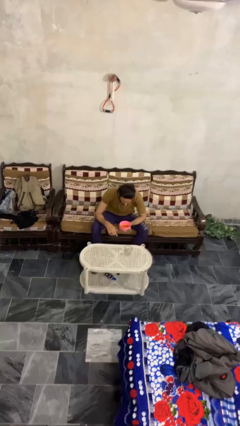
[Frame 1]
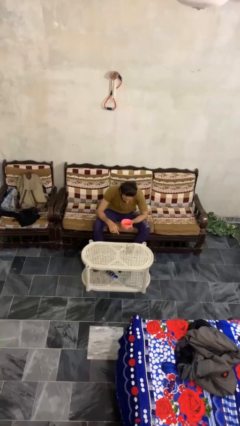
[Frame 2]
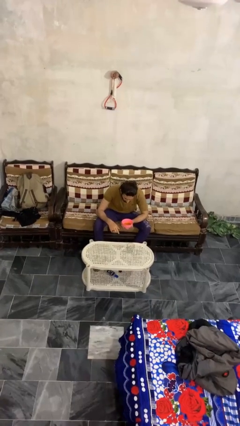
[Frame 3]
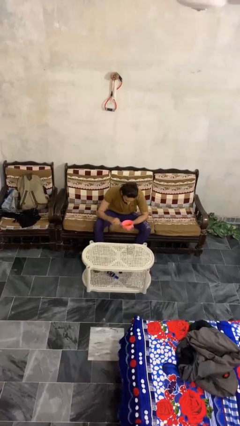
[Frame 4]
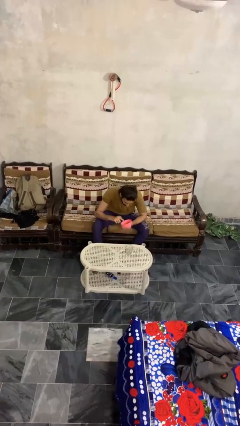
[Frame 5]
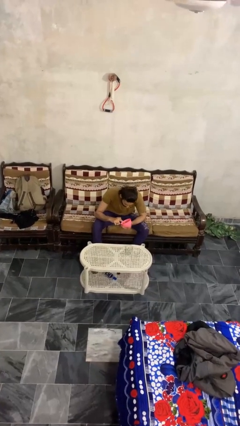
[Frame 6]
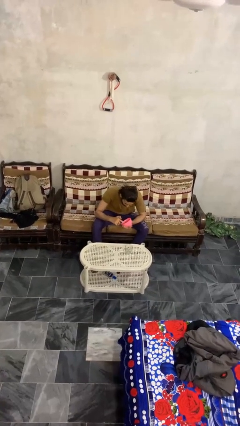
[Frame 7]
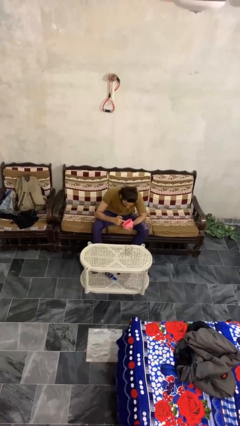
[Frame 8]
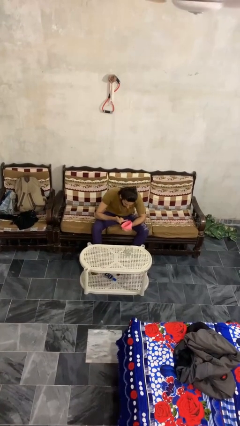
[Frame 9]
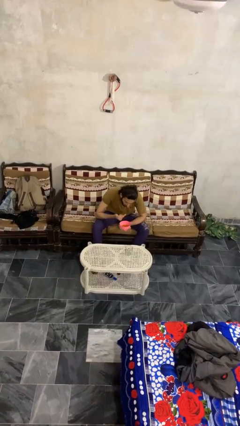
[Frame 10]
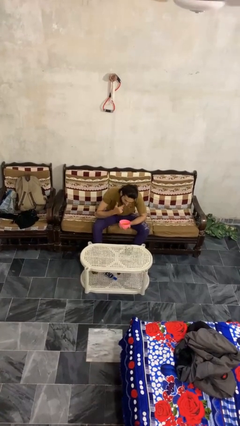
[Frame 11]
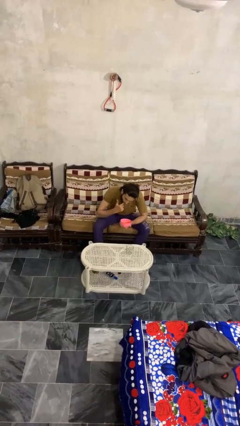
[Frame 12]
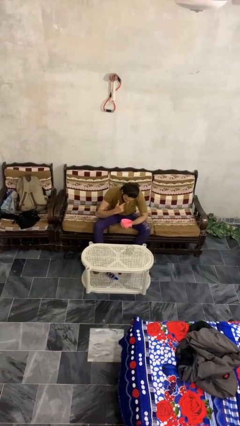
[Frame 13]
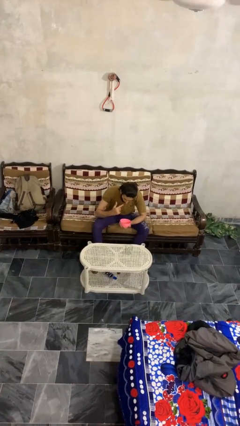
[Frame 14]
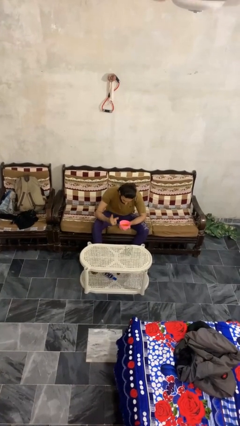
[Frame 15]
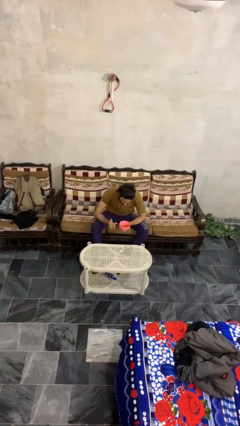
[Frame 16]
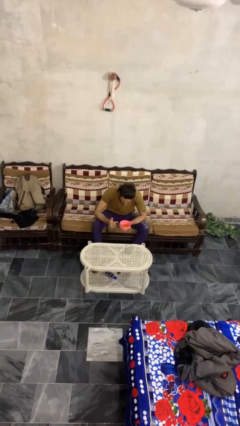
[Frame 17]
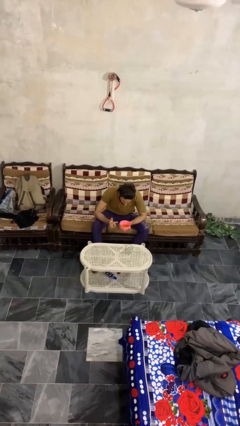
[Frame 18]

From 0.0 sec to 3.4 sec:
person eats with hands

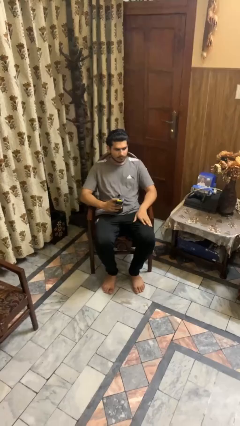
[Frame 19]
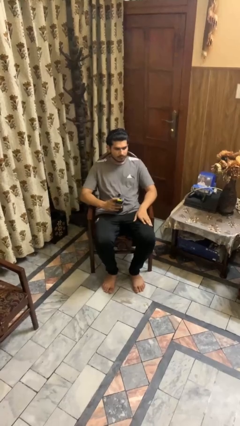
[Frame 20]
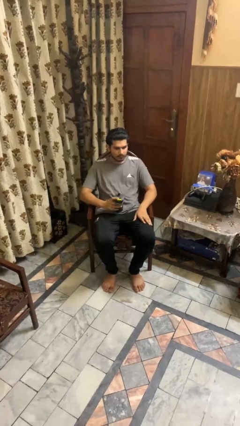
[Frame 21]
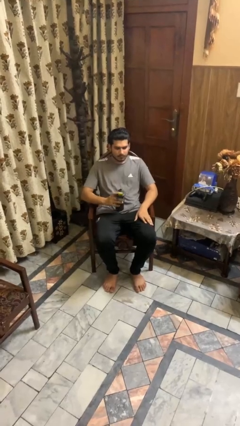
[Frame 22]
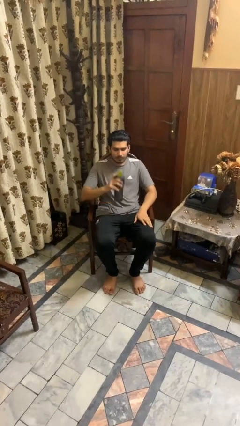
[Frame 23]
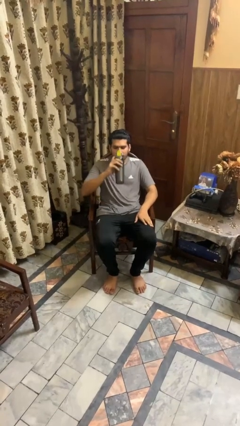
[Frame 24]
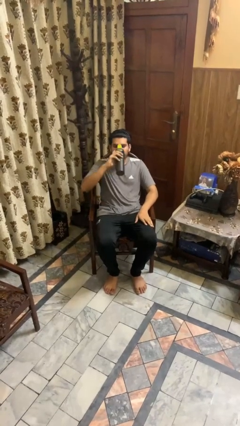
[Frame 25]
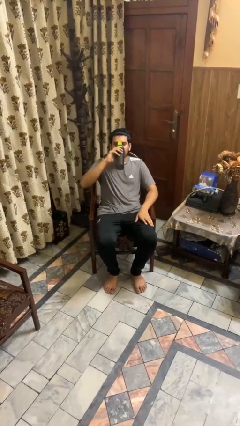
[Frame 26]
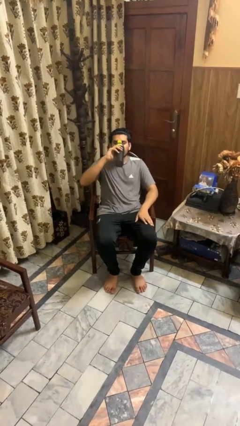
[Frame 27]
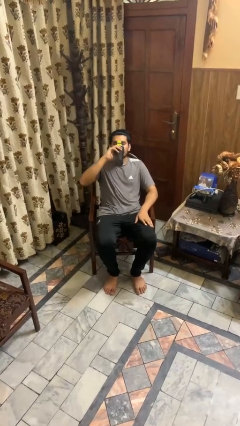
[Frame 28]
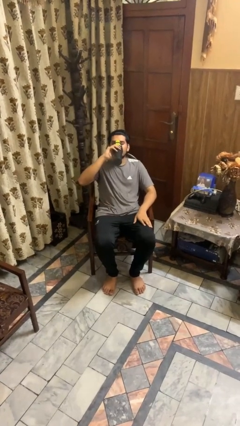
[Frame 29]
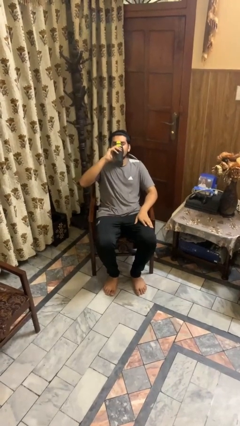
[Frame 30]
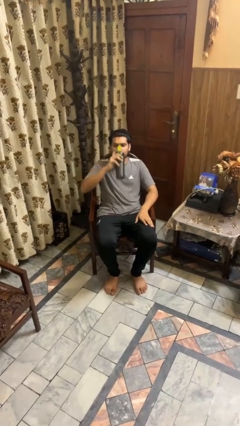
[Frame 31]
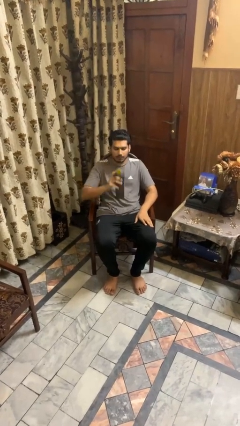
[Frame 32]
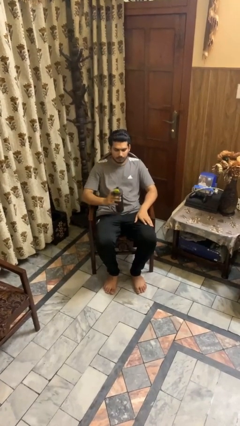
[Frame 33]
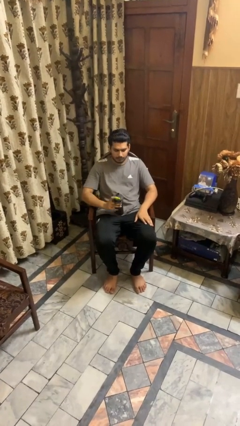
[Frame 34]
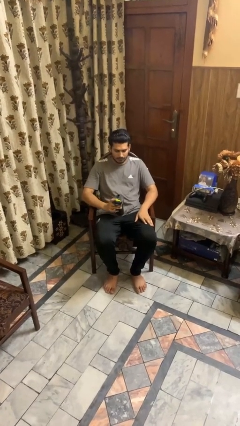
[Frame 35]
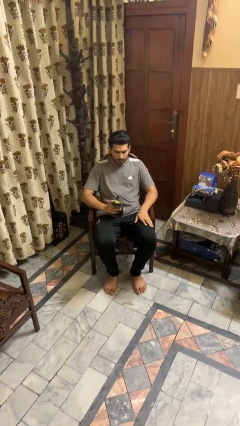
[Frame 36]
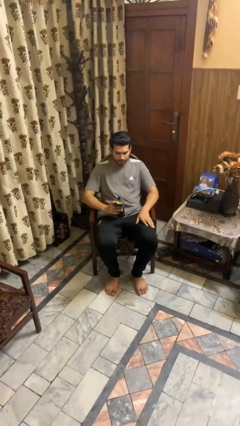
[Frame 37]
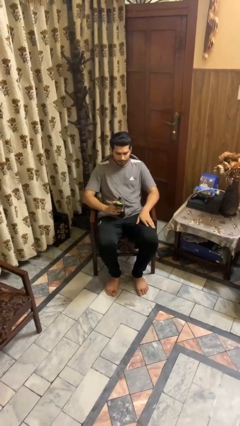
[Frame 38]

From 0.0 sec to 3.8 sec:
person drinks from bottle

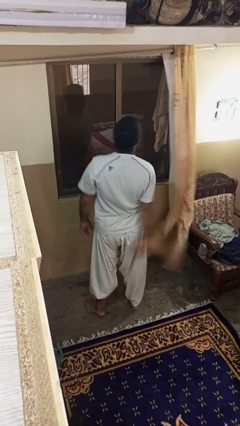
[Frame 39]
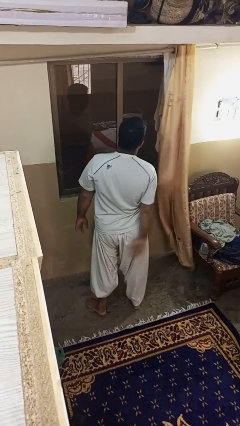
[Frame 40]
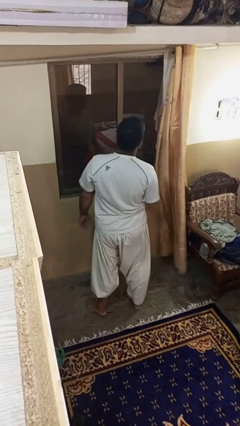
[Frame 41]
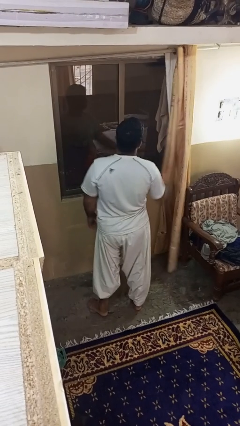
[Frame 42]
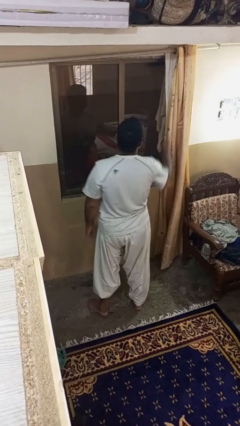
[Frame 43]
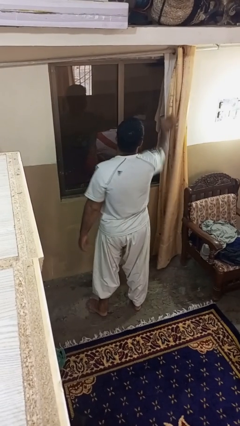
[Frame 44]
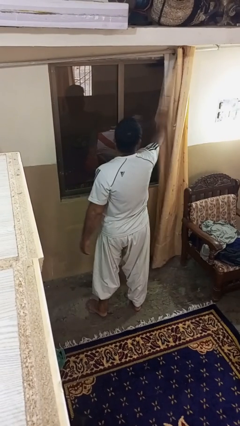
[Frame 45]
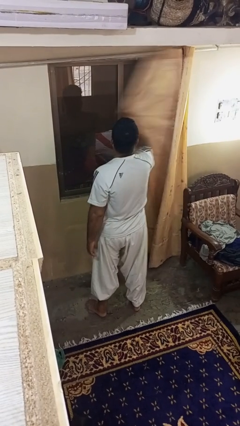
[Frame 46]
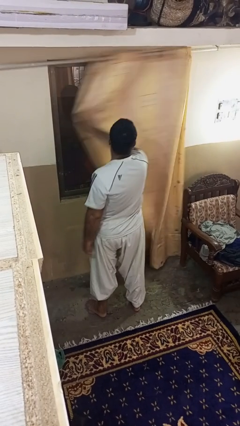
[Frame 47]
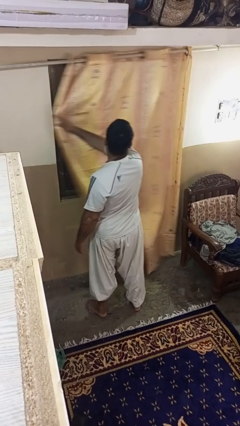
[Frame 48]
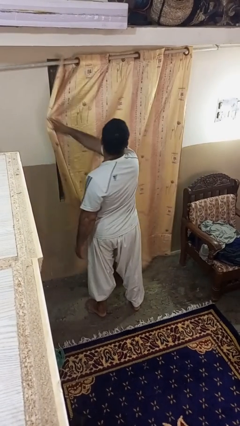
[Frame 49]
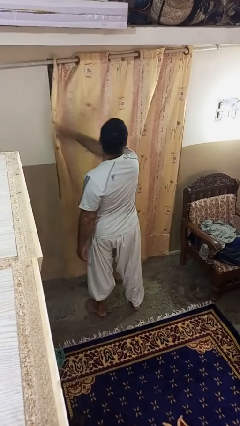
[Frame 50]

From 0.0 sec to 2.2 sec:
person closes curtains

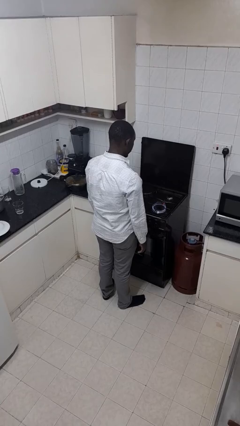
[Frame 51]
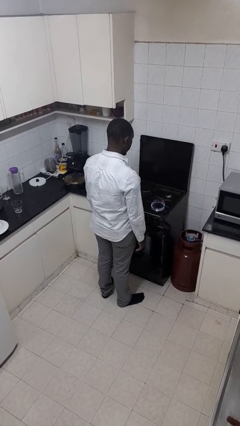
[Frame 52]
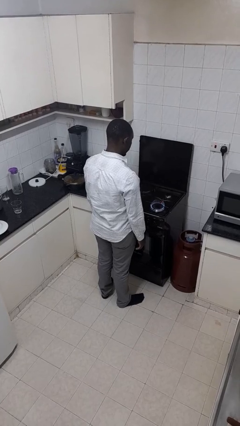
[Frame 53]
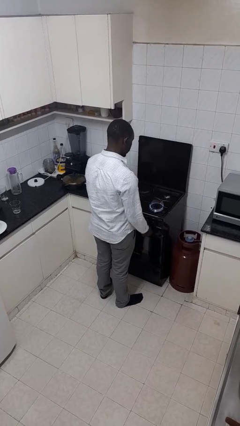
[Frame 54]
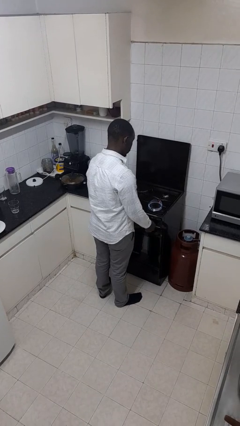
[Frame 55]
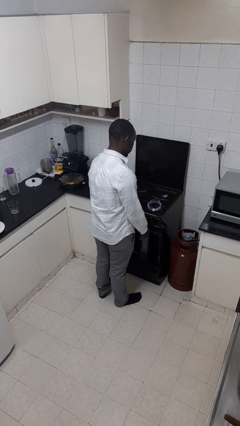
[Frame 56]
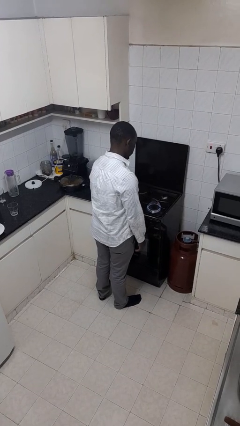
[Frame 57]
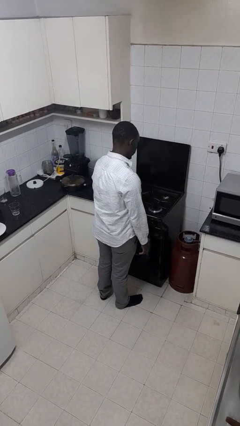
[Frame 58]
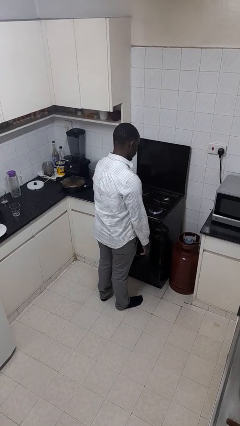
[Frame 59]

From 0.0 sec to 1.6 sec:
person turns off stovetop

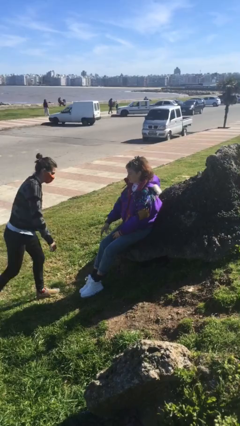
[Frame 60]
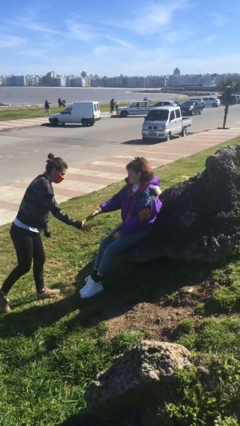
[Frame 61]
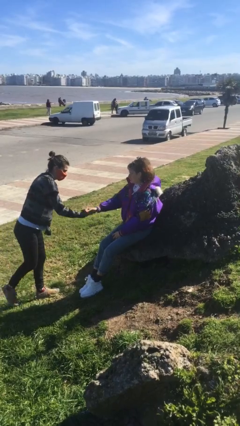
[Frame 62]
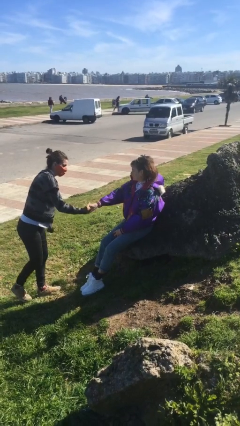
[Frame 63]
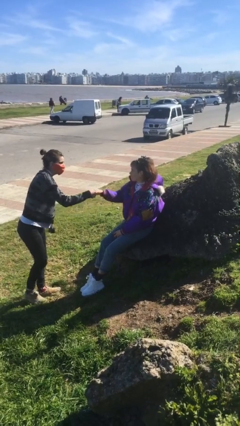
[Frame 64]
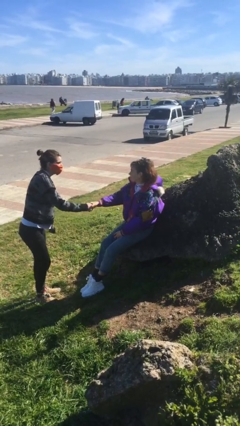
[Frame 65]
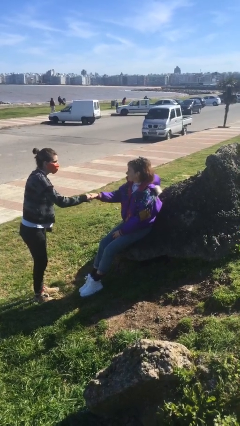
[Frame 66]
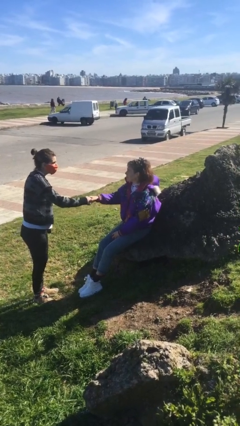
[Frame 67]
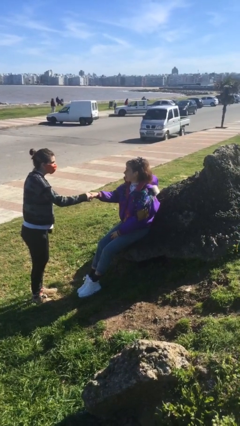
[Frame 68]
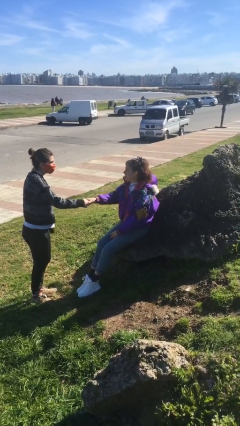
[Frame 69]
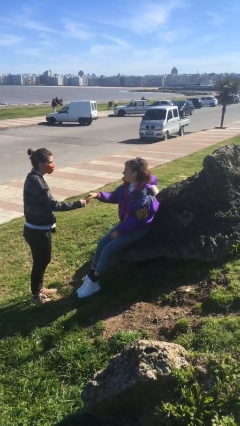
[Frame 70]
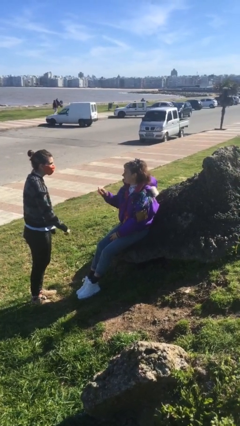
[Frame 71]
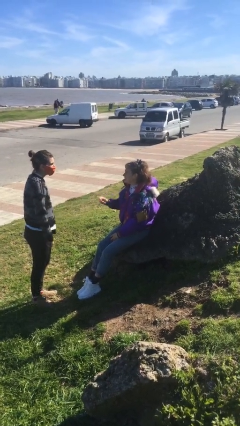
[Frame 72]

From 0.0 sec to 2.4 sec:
person shakes hand

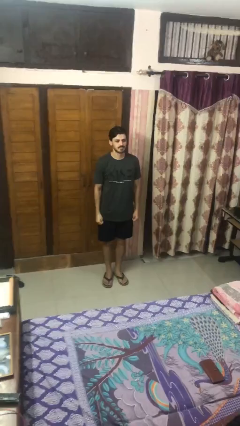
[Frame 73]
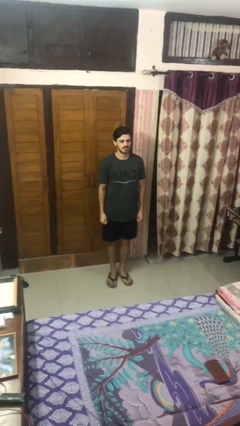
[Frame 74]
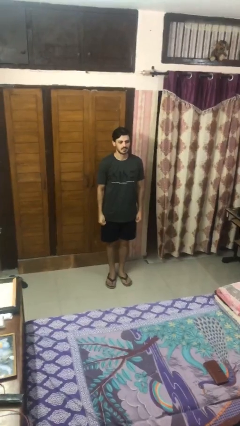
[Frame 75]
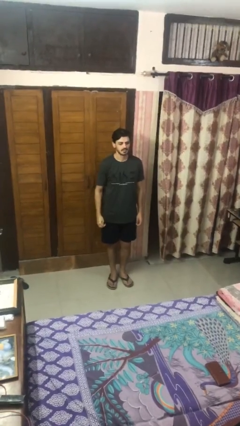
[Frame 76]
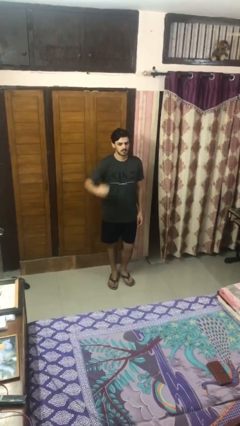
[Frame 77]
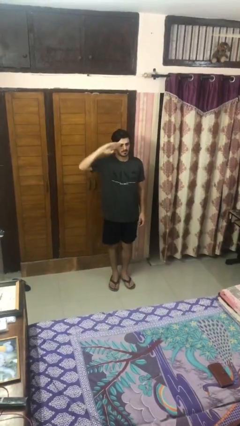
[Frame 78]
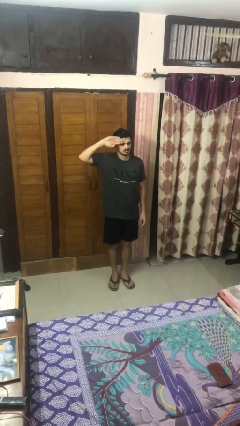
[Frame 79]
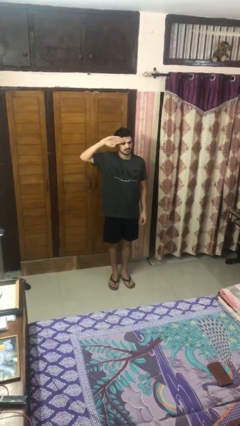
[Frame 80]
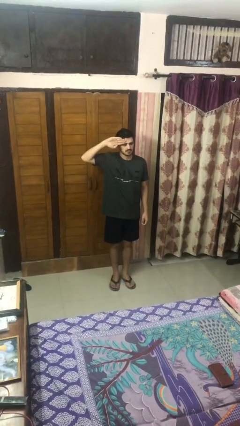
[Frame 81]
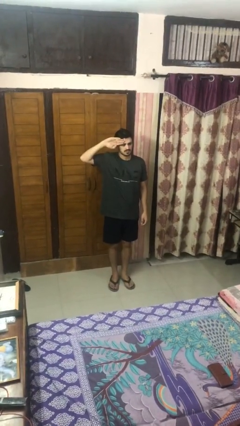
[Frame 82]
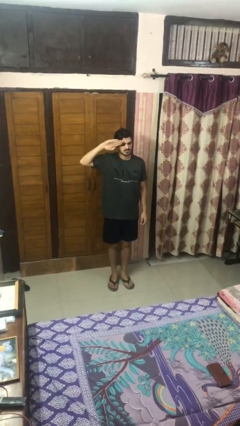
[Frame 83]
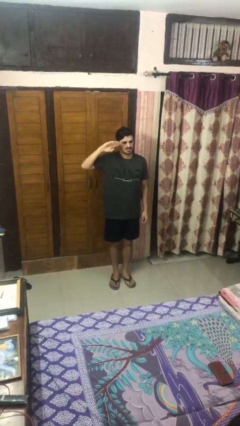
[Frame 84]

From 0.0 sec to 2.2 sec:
person salutes

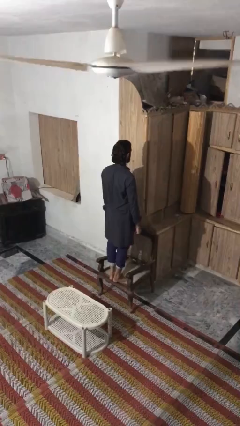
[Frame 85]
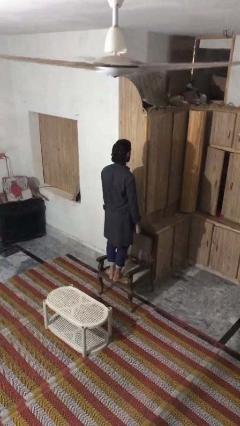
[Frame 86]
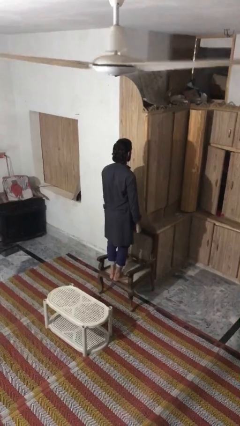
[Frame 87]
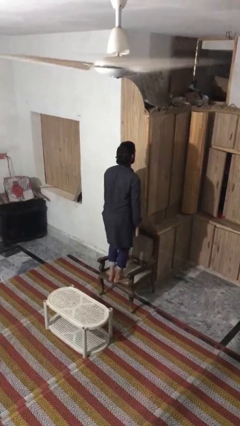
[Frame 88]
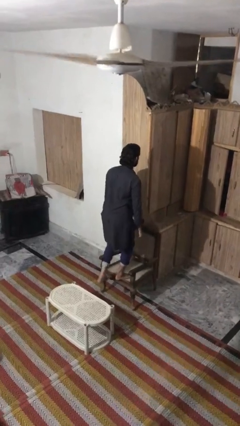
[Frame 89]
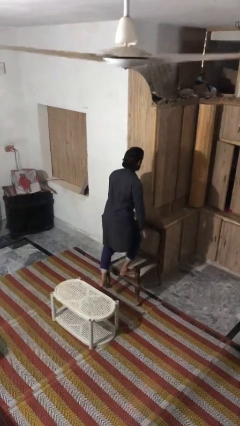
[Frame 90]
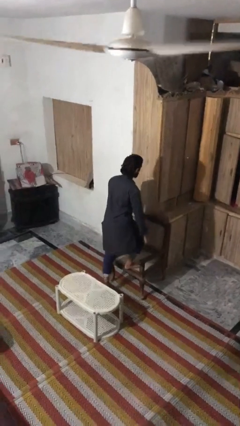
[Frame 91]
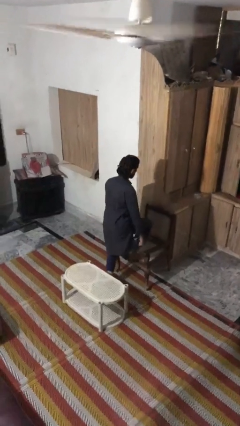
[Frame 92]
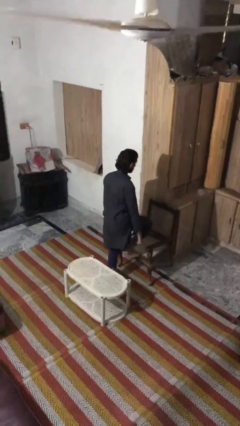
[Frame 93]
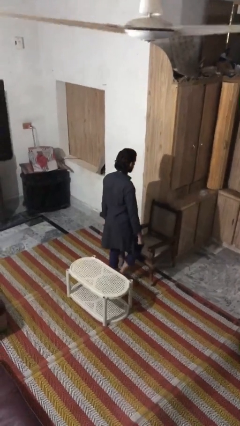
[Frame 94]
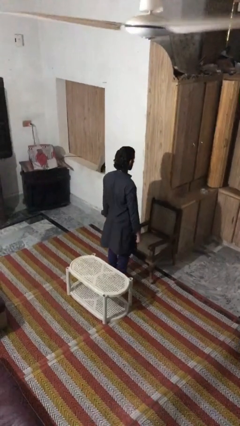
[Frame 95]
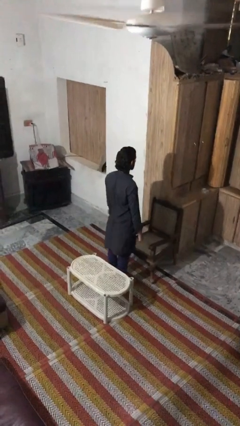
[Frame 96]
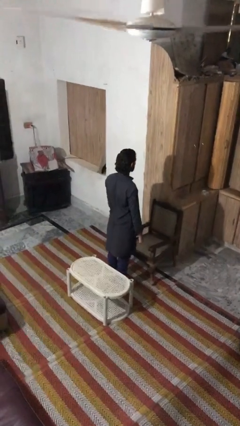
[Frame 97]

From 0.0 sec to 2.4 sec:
person climbs off chair
